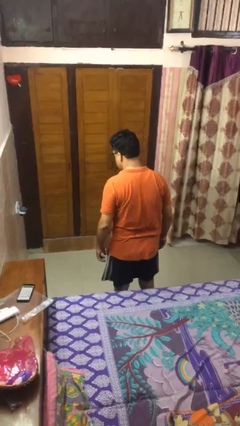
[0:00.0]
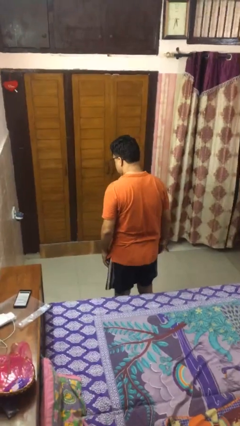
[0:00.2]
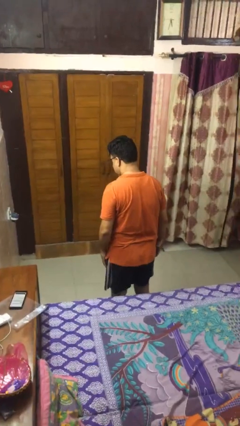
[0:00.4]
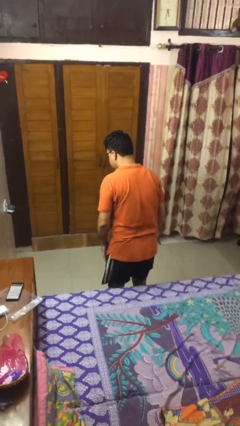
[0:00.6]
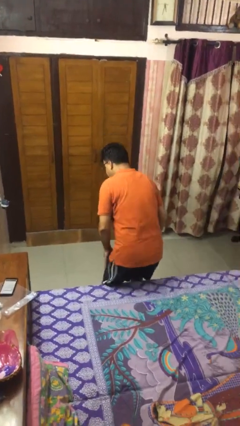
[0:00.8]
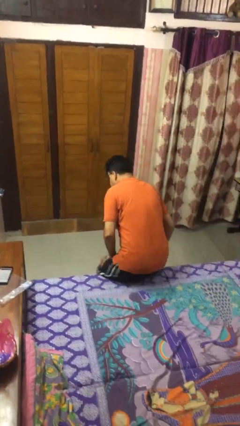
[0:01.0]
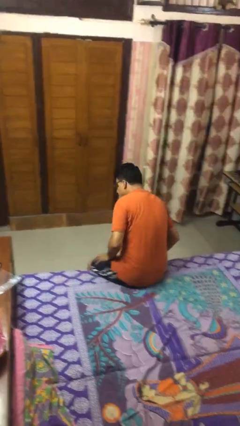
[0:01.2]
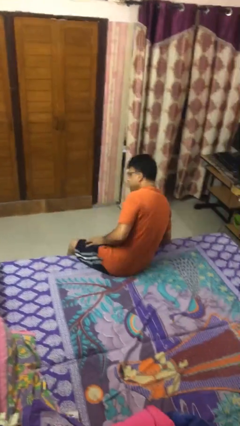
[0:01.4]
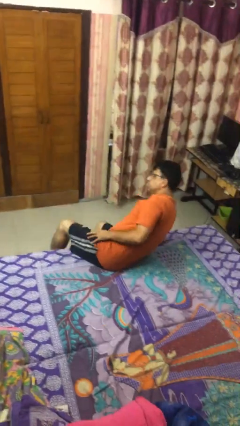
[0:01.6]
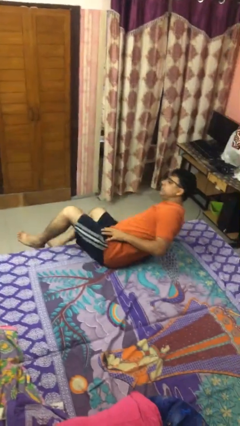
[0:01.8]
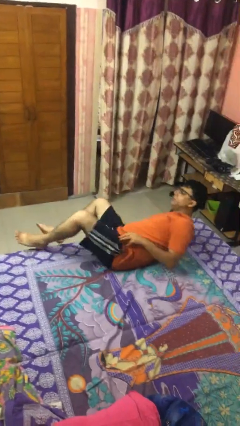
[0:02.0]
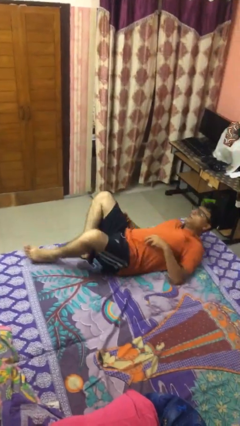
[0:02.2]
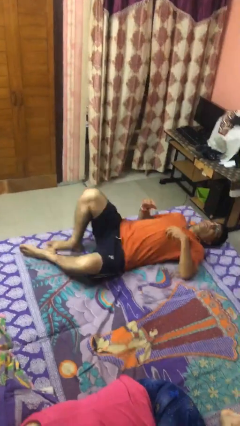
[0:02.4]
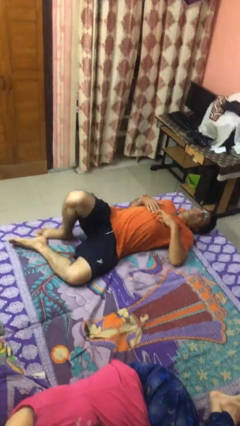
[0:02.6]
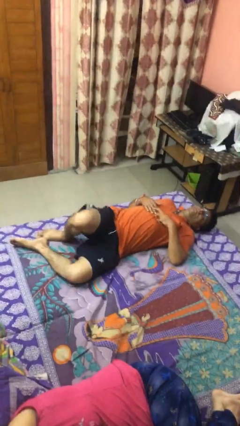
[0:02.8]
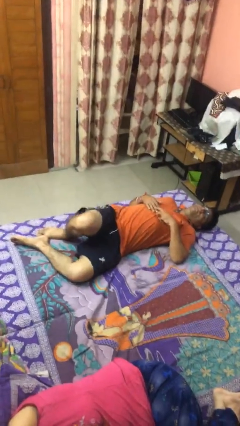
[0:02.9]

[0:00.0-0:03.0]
person lies down on bed

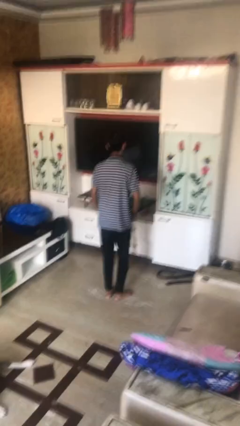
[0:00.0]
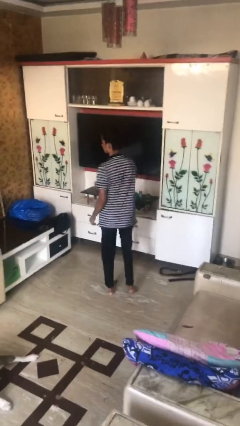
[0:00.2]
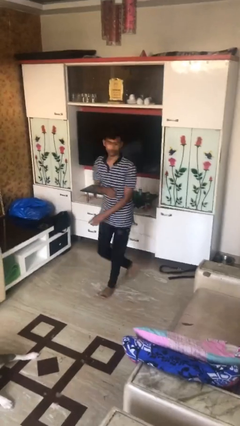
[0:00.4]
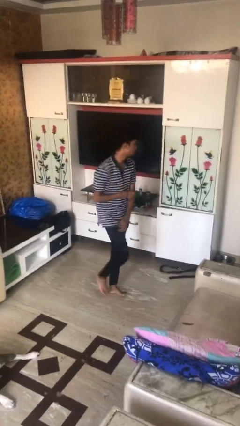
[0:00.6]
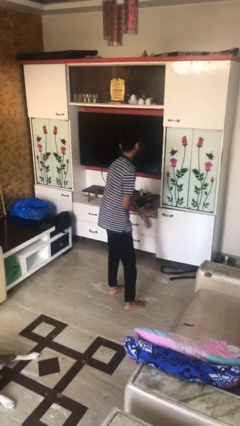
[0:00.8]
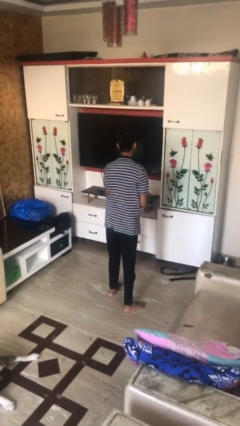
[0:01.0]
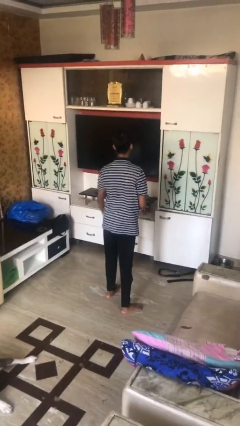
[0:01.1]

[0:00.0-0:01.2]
person twirls

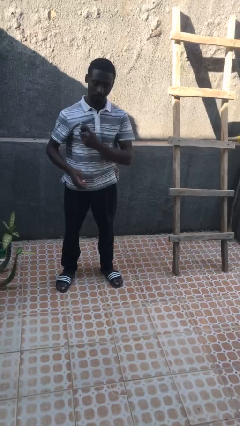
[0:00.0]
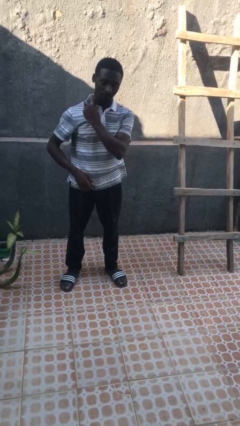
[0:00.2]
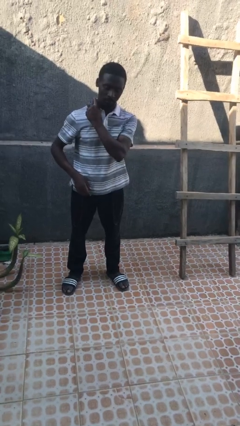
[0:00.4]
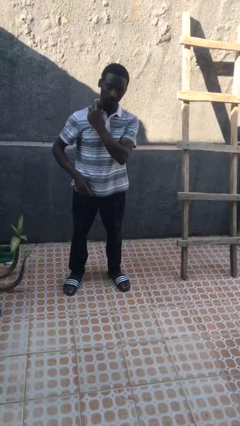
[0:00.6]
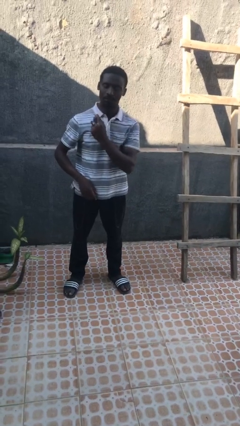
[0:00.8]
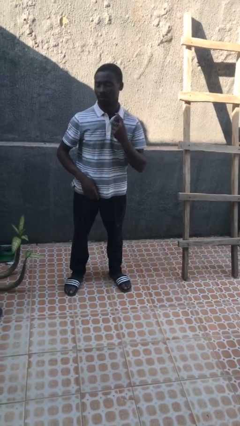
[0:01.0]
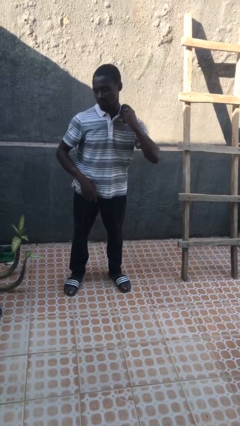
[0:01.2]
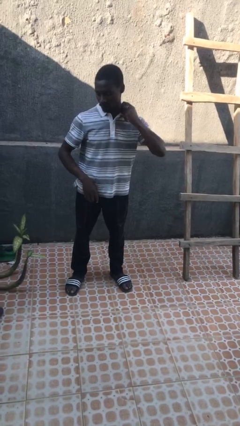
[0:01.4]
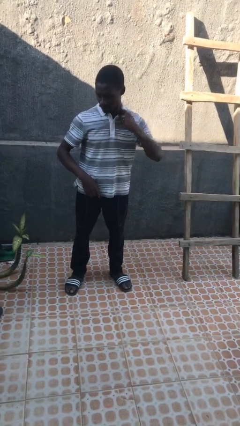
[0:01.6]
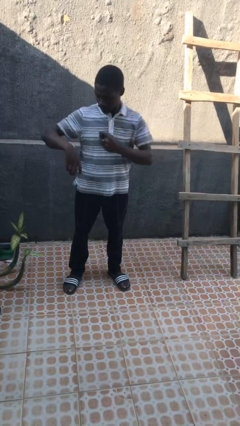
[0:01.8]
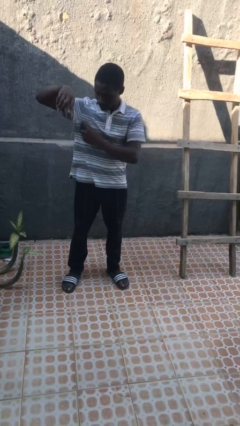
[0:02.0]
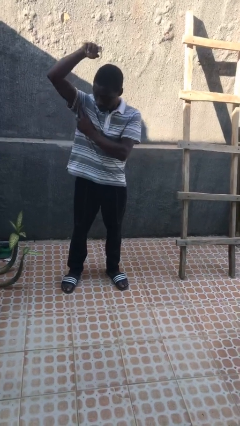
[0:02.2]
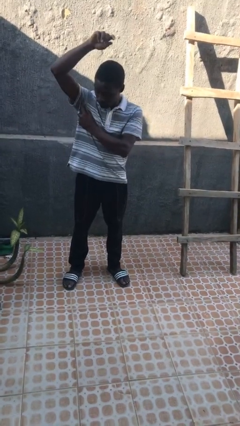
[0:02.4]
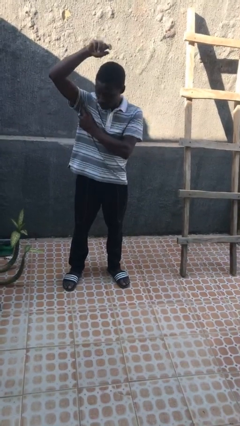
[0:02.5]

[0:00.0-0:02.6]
person applies deodorant

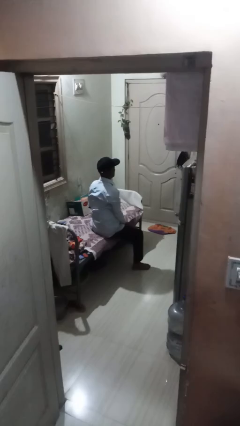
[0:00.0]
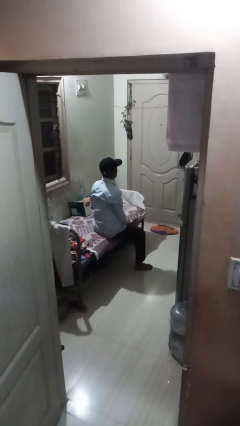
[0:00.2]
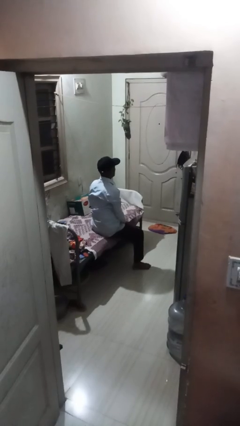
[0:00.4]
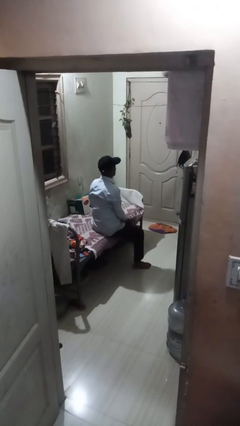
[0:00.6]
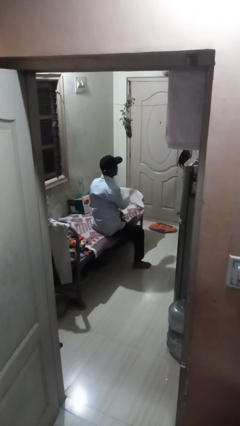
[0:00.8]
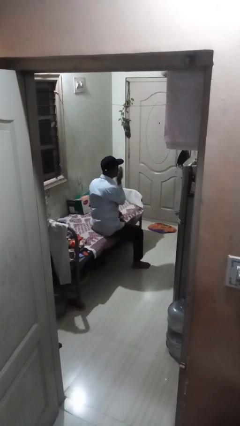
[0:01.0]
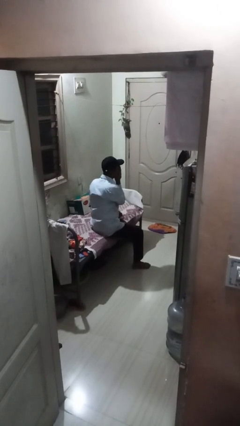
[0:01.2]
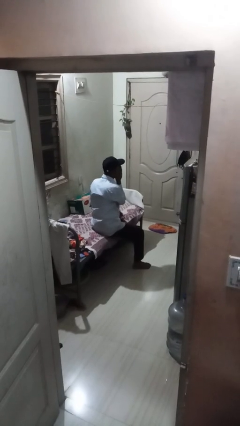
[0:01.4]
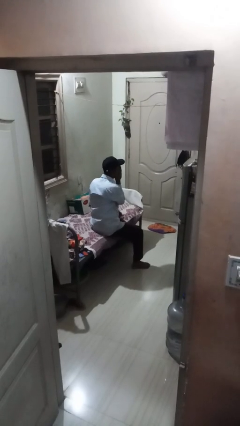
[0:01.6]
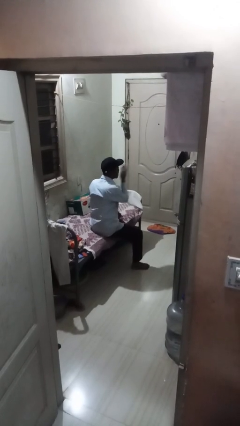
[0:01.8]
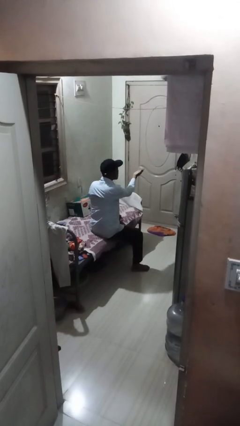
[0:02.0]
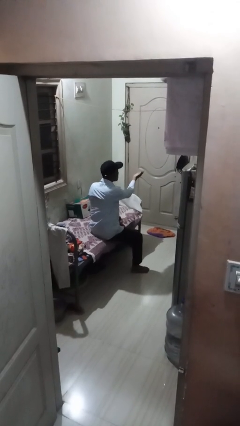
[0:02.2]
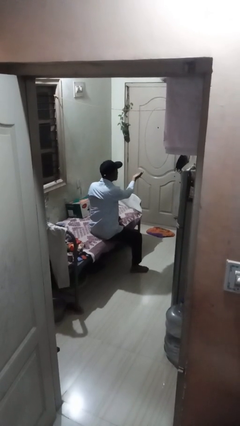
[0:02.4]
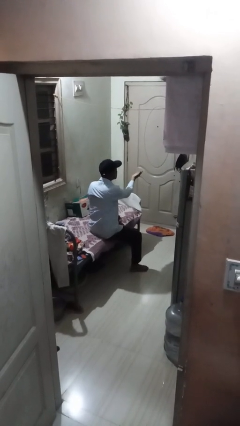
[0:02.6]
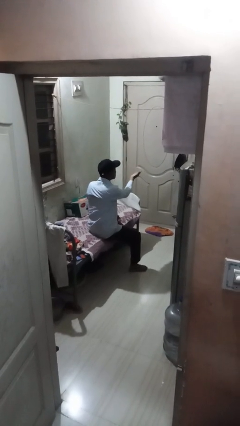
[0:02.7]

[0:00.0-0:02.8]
person gestures blow kiss

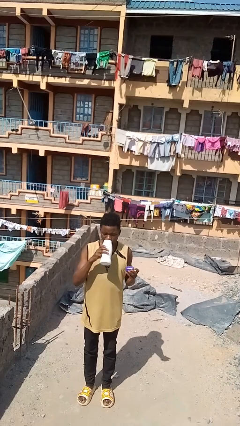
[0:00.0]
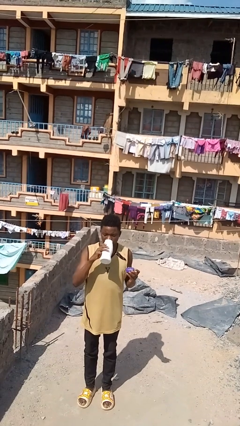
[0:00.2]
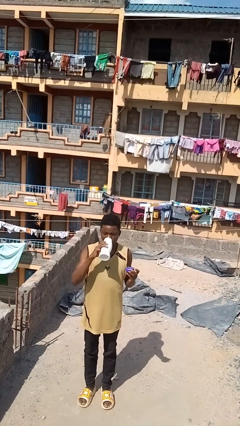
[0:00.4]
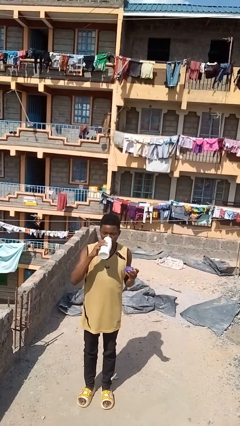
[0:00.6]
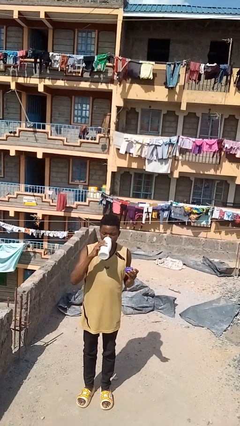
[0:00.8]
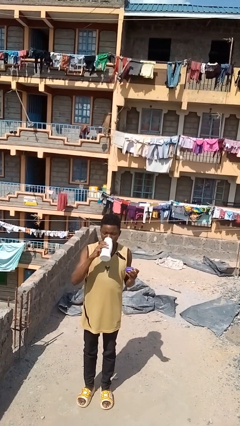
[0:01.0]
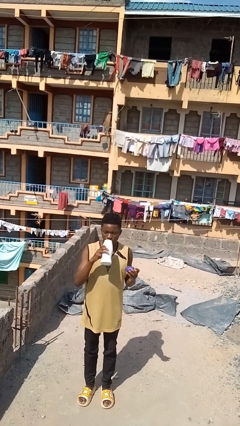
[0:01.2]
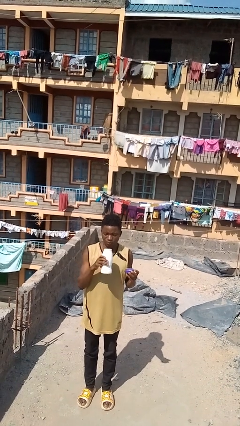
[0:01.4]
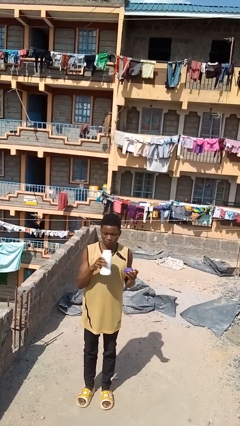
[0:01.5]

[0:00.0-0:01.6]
person drinks from beverage can

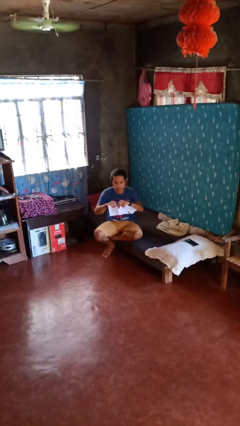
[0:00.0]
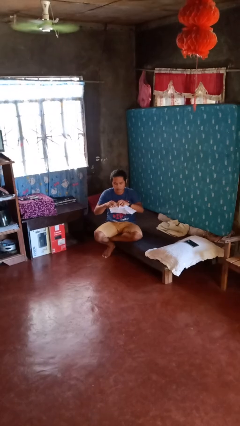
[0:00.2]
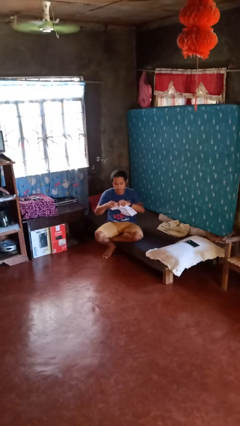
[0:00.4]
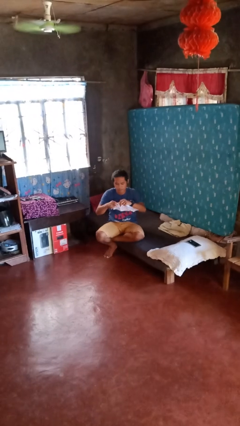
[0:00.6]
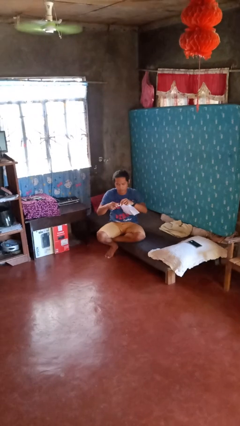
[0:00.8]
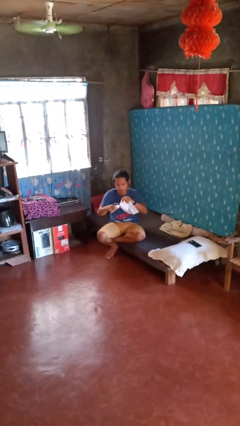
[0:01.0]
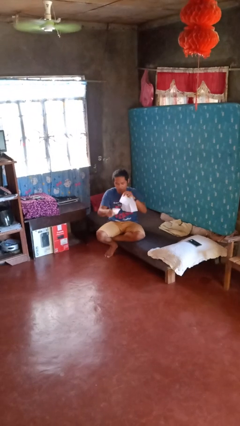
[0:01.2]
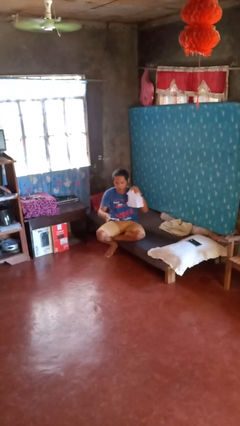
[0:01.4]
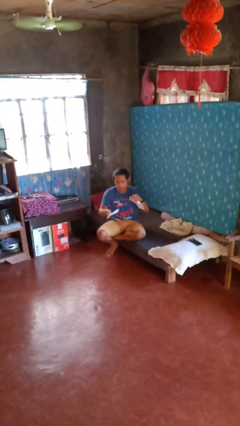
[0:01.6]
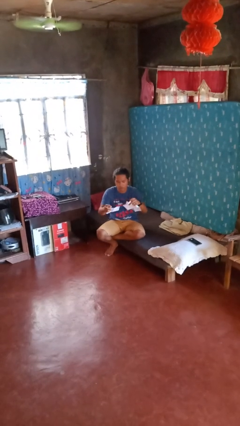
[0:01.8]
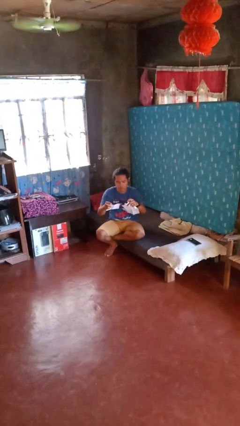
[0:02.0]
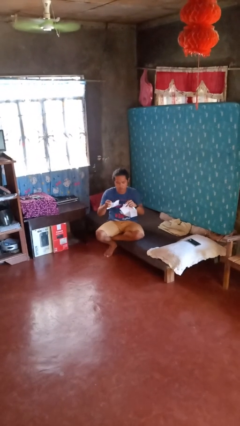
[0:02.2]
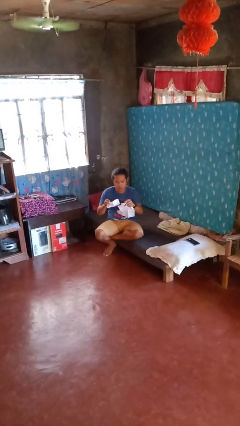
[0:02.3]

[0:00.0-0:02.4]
person tears paper

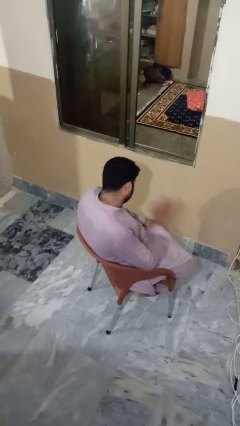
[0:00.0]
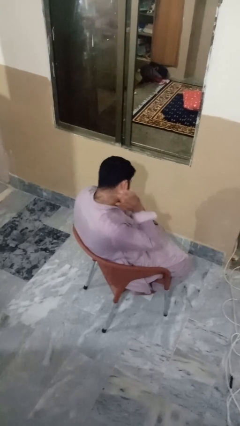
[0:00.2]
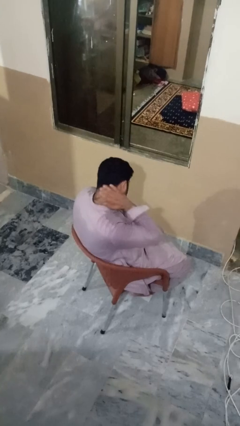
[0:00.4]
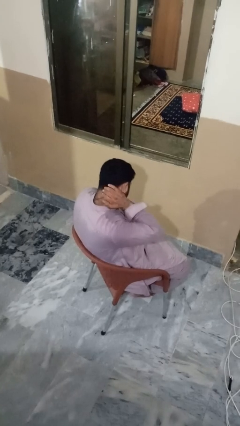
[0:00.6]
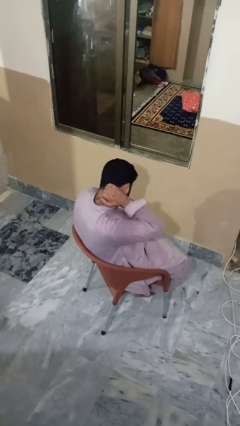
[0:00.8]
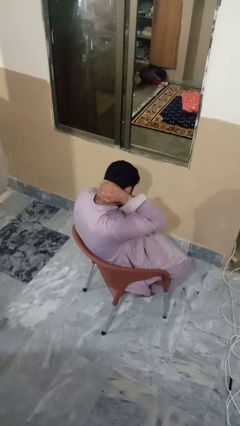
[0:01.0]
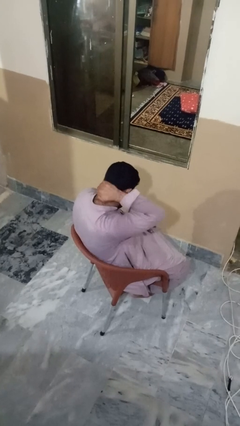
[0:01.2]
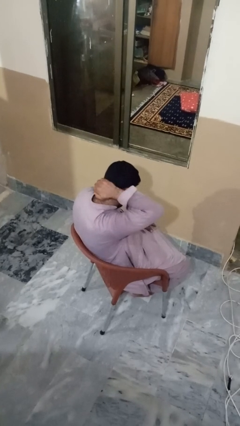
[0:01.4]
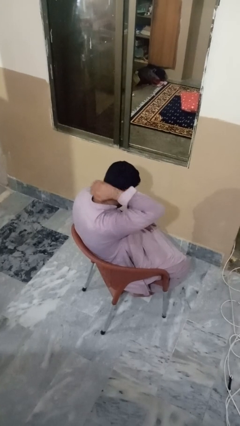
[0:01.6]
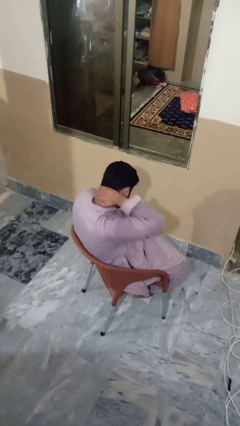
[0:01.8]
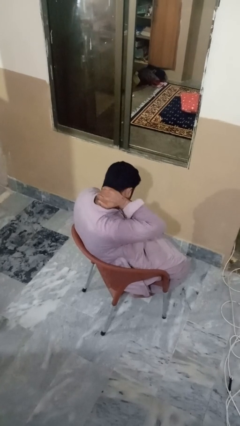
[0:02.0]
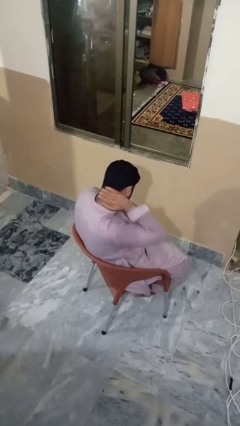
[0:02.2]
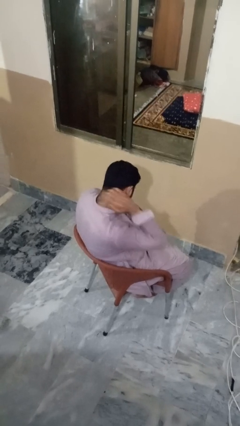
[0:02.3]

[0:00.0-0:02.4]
person rubs neck

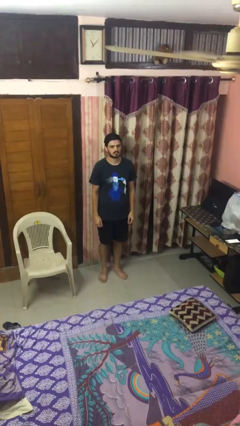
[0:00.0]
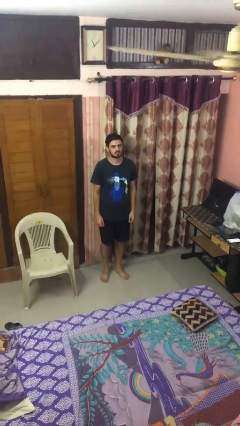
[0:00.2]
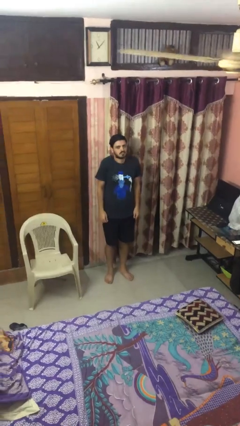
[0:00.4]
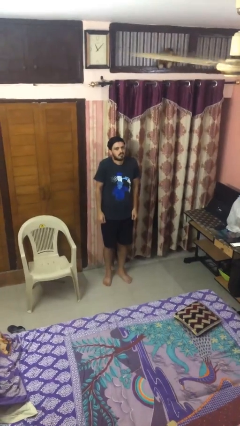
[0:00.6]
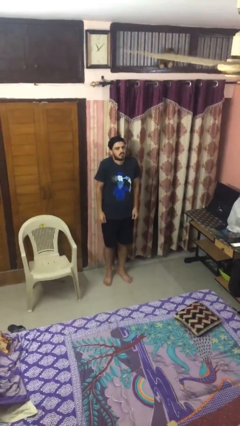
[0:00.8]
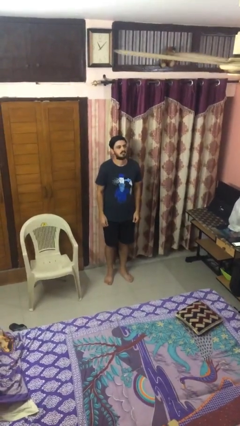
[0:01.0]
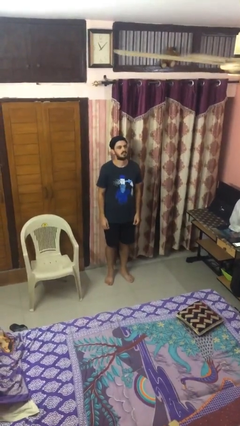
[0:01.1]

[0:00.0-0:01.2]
person shrugs
